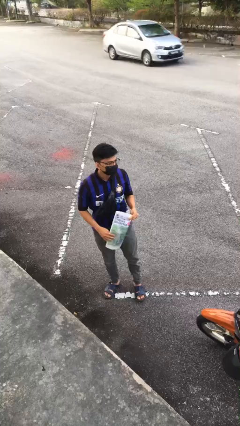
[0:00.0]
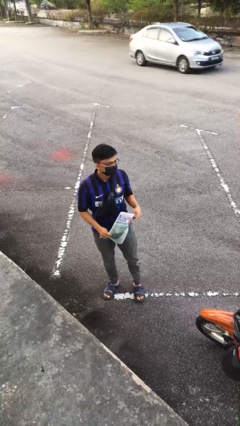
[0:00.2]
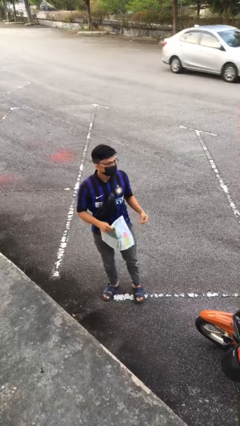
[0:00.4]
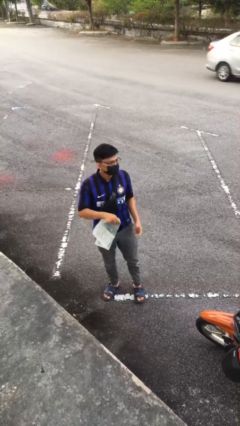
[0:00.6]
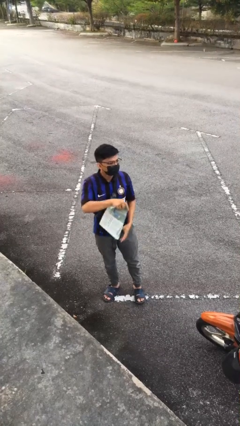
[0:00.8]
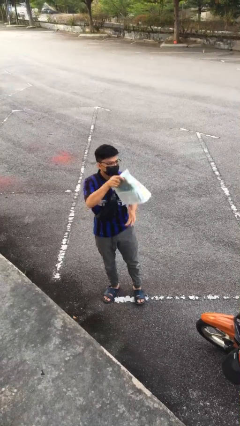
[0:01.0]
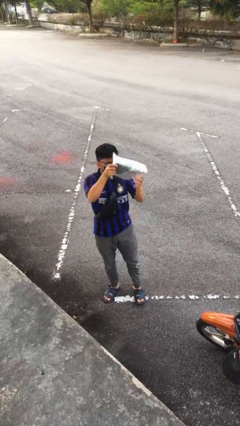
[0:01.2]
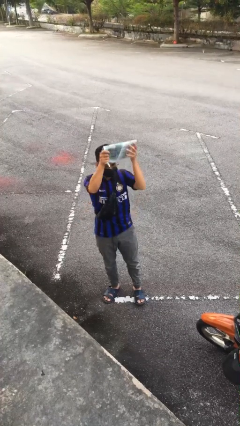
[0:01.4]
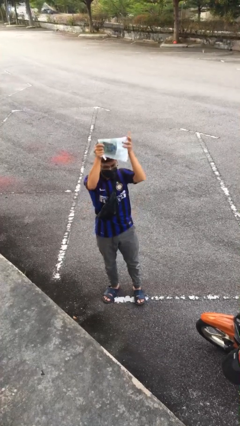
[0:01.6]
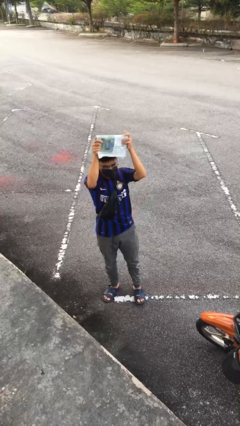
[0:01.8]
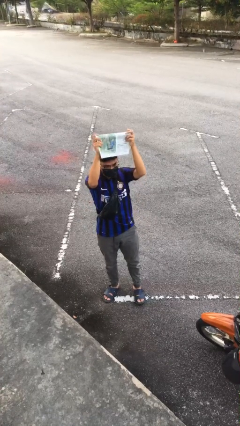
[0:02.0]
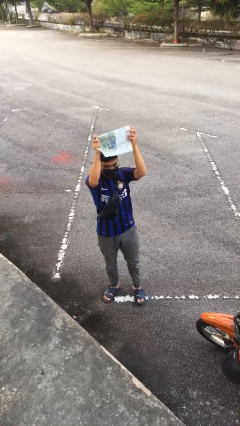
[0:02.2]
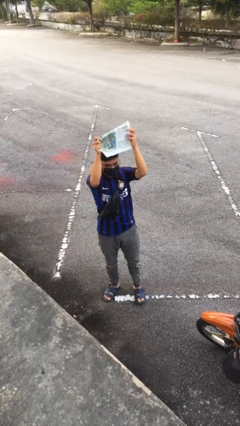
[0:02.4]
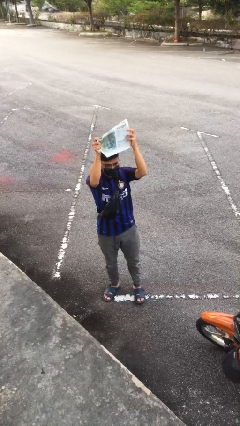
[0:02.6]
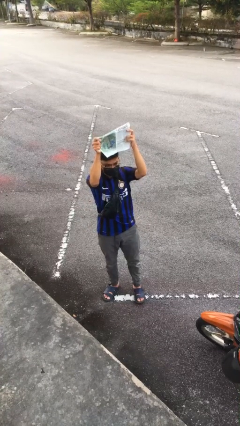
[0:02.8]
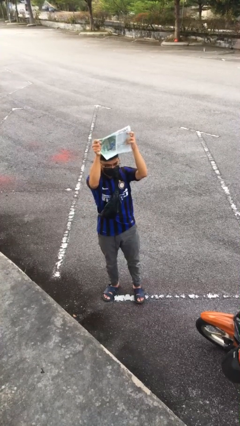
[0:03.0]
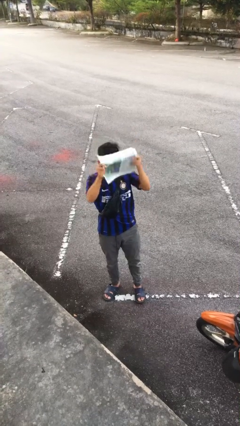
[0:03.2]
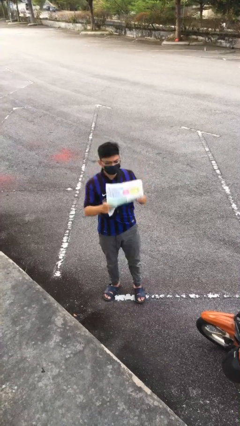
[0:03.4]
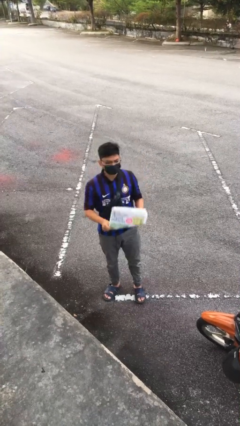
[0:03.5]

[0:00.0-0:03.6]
person holds object above head

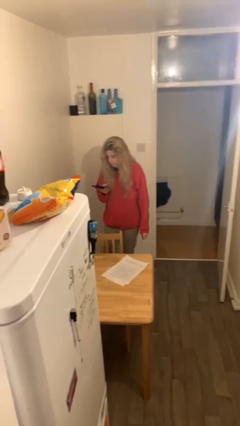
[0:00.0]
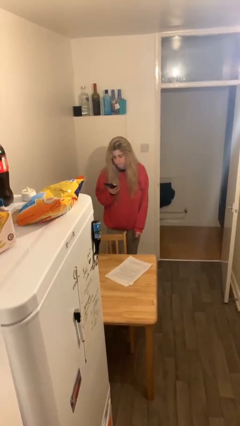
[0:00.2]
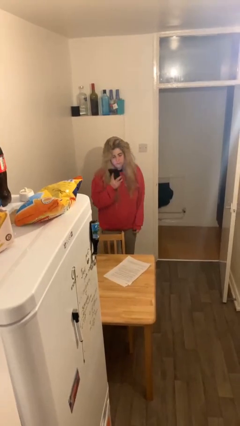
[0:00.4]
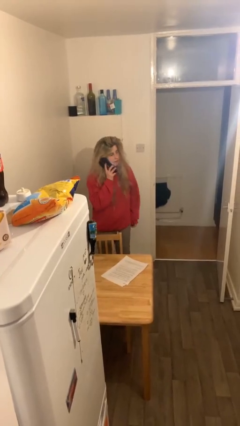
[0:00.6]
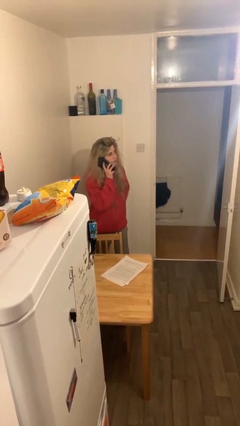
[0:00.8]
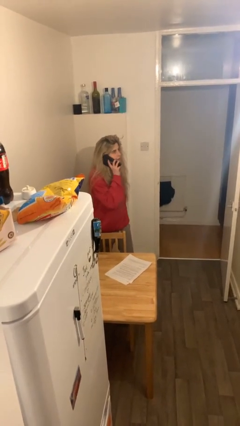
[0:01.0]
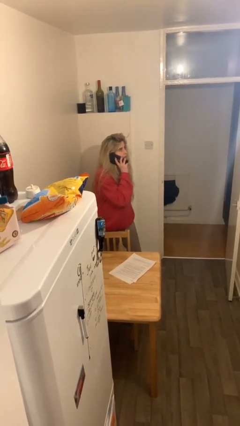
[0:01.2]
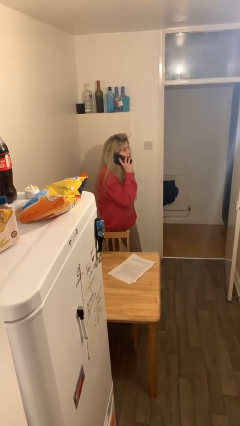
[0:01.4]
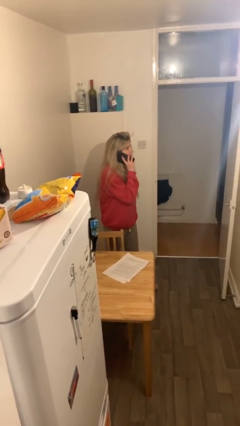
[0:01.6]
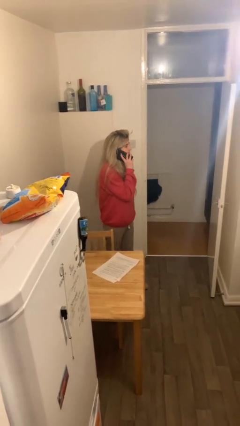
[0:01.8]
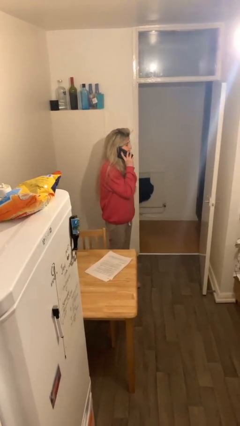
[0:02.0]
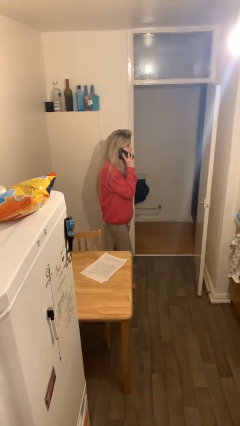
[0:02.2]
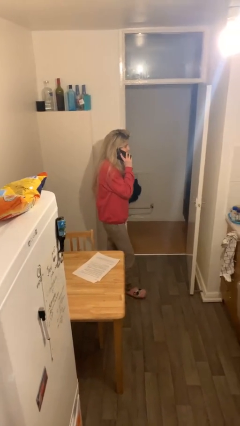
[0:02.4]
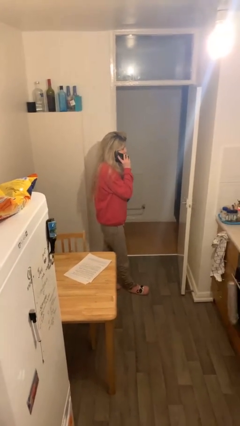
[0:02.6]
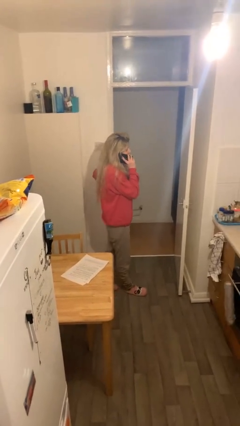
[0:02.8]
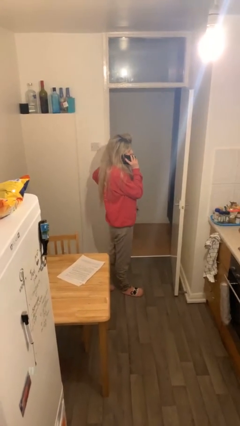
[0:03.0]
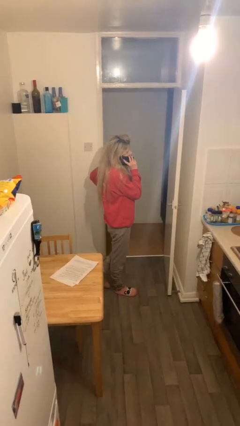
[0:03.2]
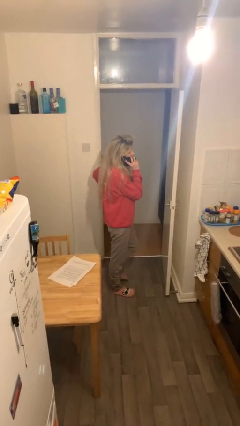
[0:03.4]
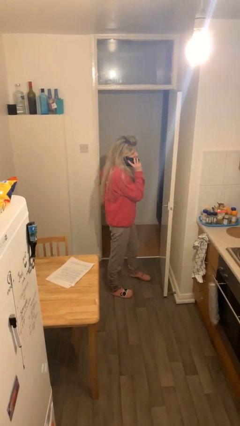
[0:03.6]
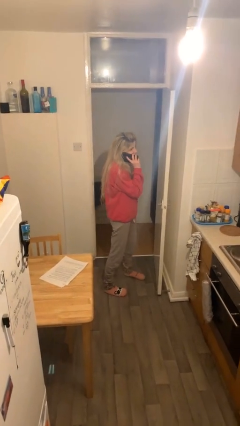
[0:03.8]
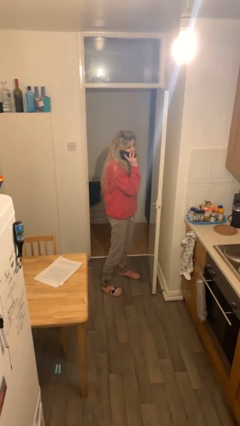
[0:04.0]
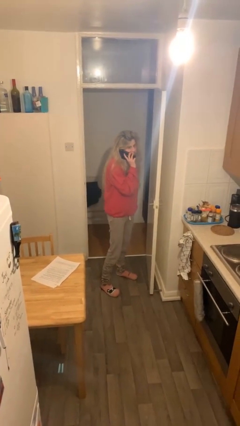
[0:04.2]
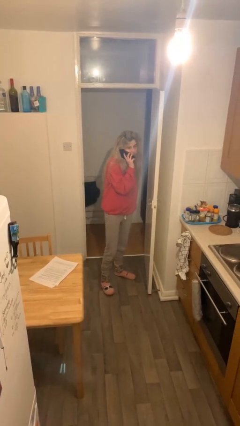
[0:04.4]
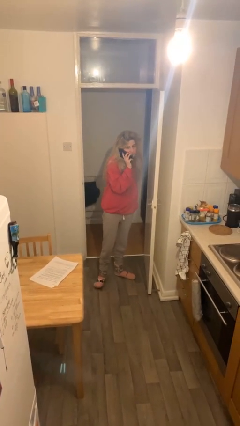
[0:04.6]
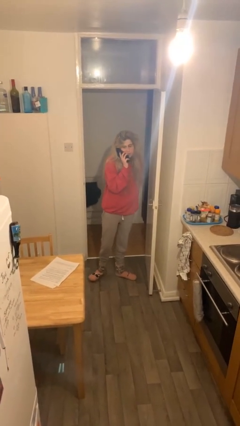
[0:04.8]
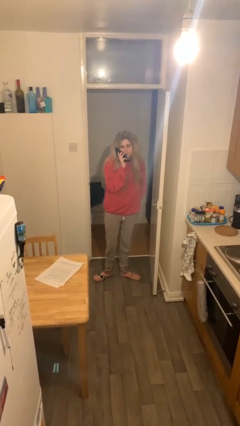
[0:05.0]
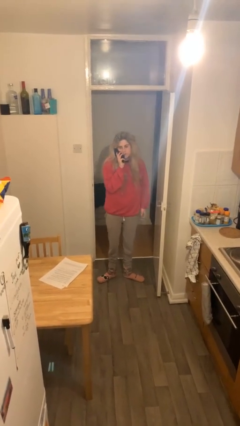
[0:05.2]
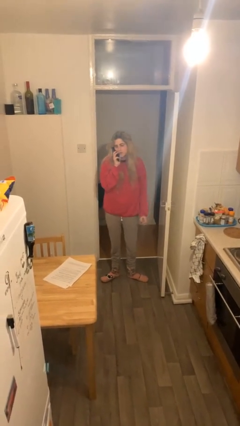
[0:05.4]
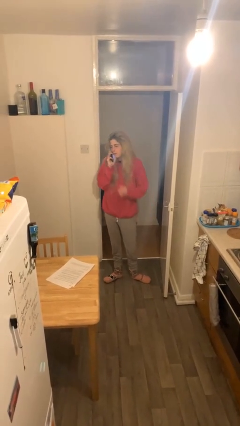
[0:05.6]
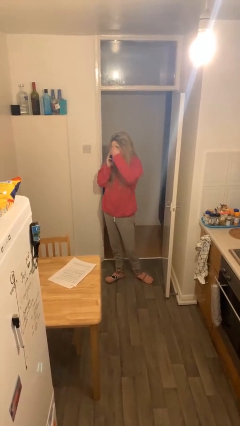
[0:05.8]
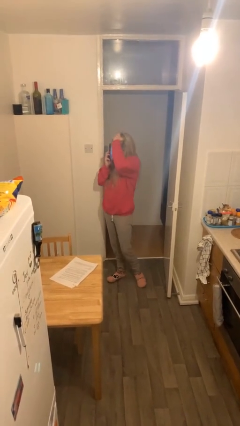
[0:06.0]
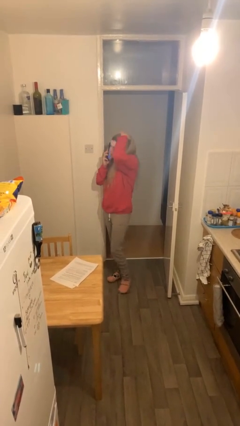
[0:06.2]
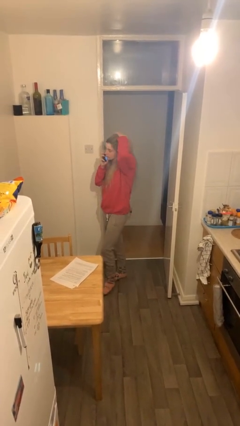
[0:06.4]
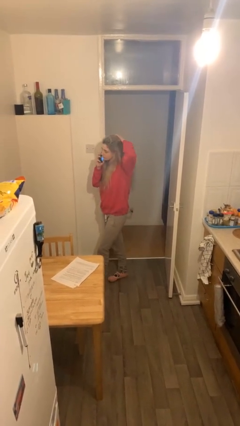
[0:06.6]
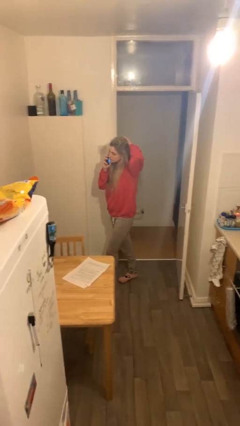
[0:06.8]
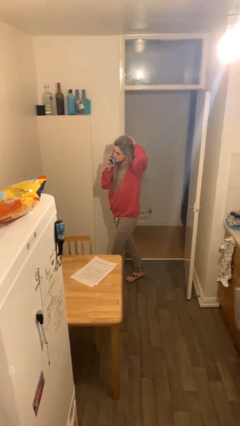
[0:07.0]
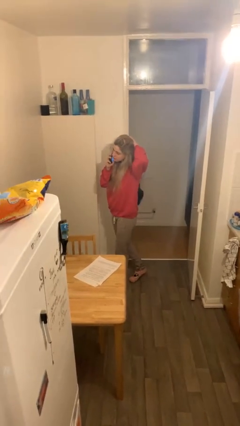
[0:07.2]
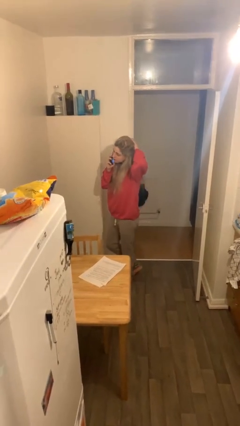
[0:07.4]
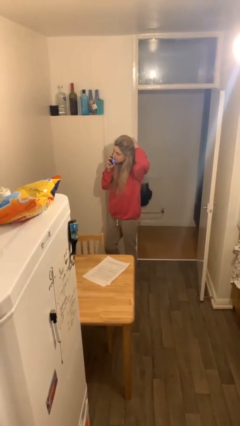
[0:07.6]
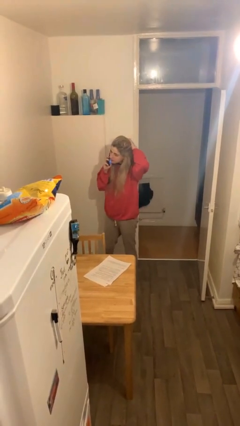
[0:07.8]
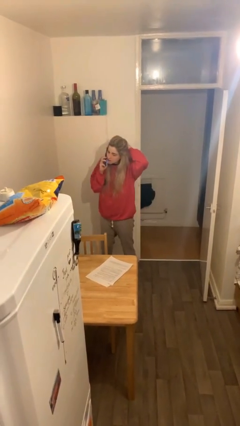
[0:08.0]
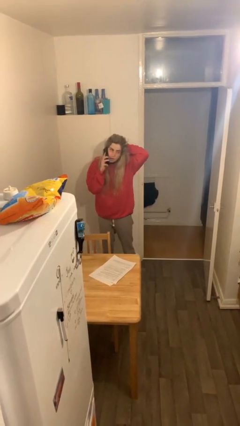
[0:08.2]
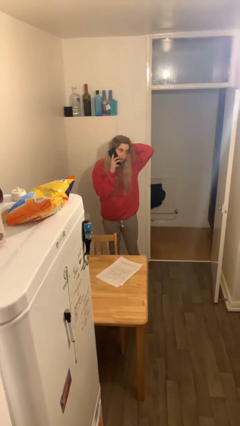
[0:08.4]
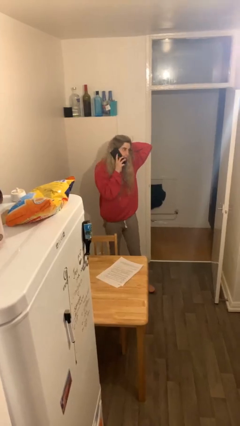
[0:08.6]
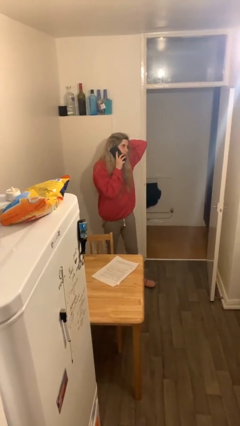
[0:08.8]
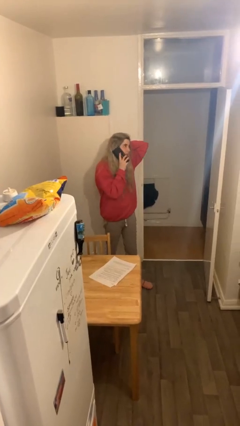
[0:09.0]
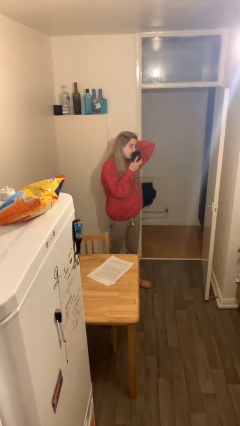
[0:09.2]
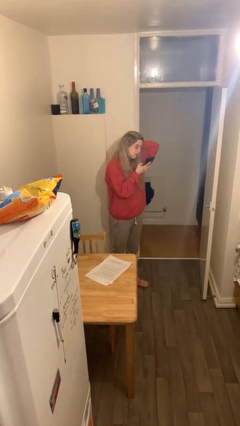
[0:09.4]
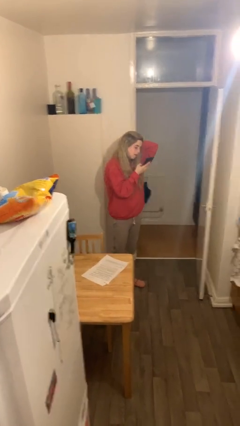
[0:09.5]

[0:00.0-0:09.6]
person talks on phone

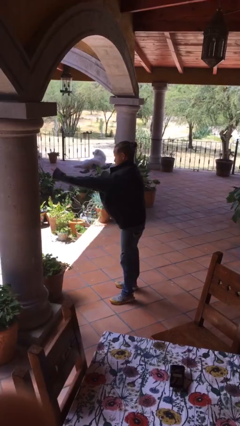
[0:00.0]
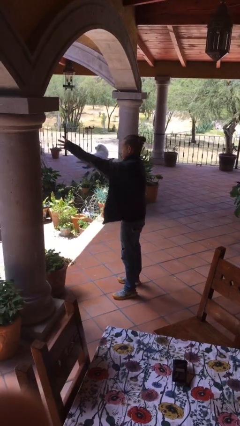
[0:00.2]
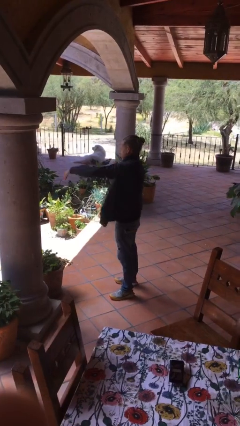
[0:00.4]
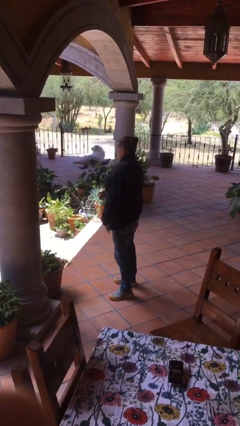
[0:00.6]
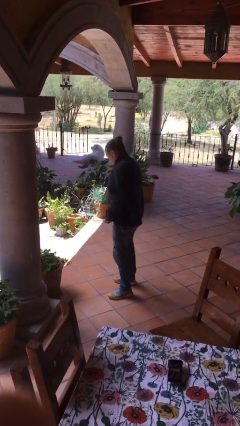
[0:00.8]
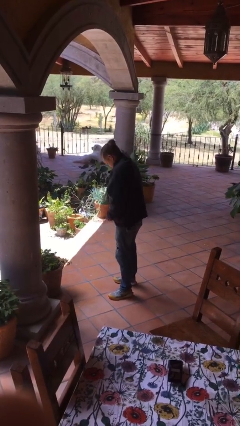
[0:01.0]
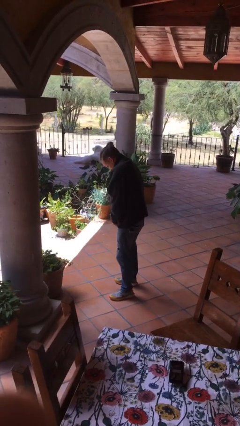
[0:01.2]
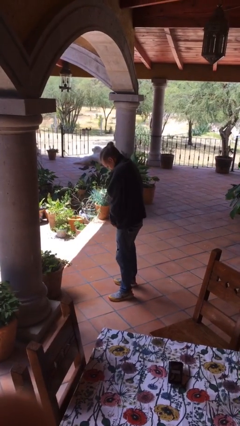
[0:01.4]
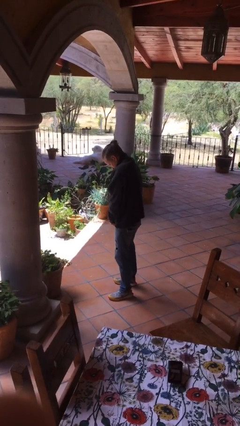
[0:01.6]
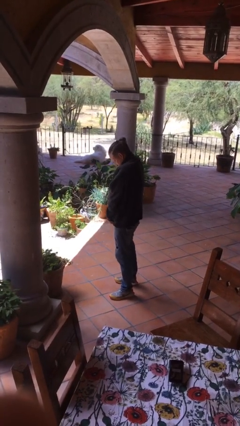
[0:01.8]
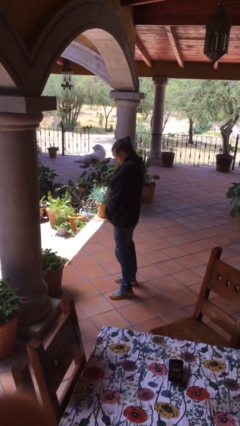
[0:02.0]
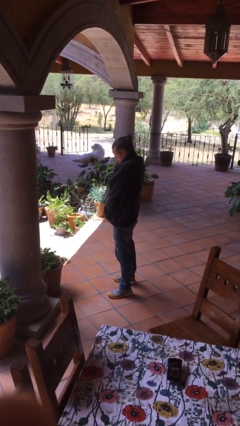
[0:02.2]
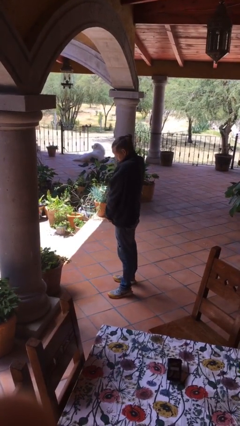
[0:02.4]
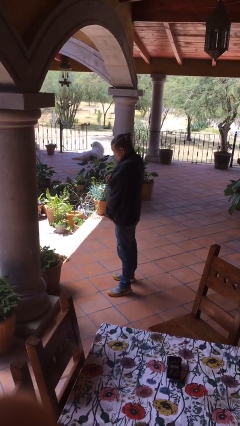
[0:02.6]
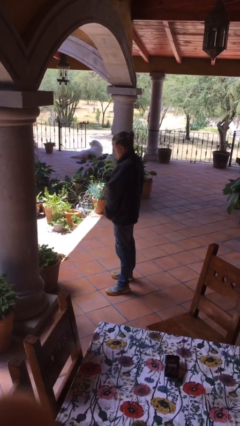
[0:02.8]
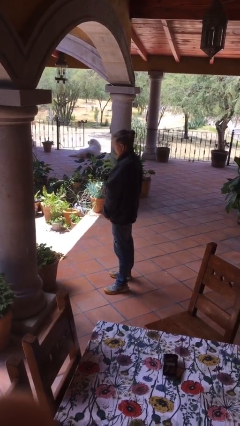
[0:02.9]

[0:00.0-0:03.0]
person zips up jacket

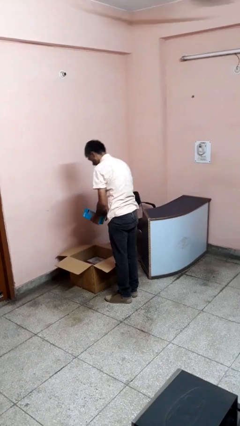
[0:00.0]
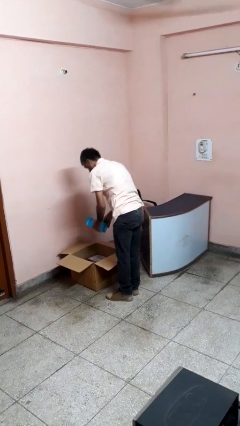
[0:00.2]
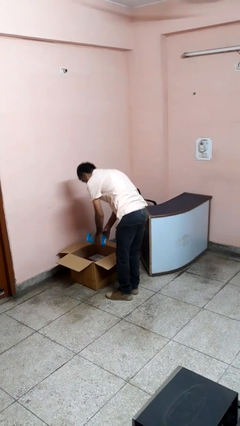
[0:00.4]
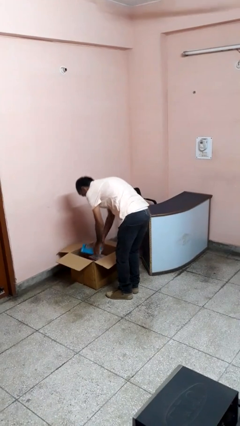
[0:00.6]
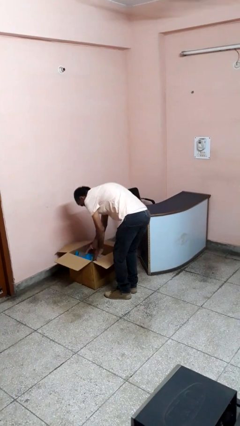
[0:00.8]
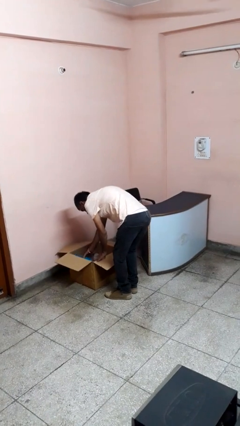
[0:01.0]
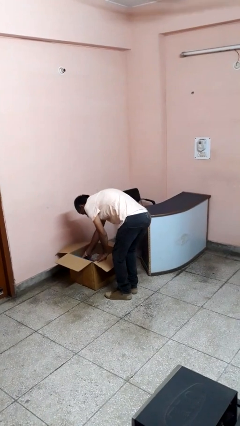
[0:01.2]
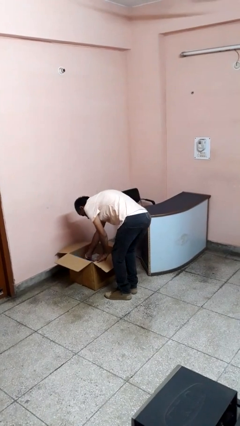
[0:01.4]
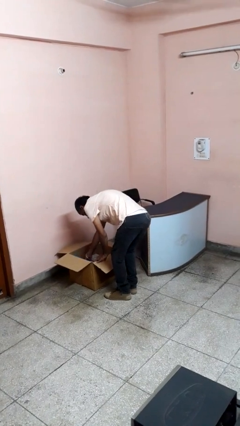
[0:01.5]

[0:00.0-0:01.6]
person puts object into box
